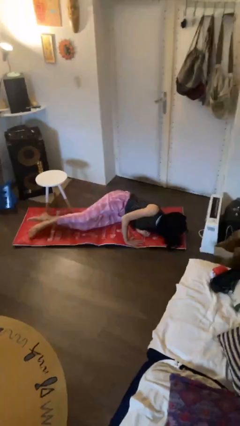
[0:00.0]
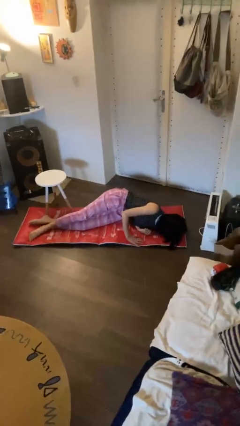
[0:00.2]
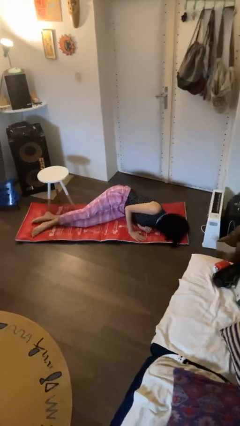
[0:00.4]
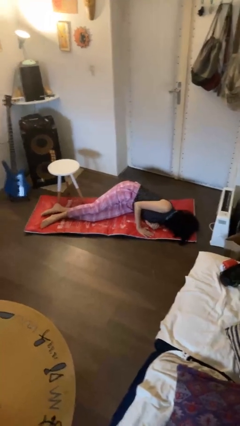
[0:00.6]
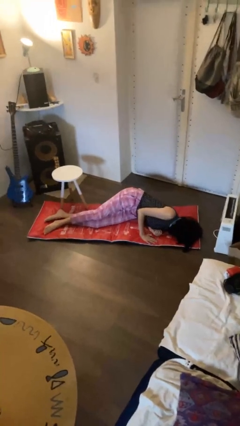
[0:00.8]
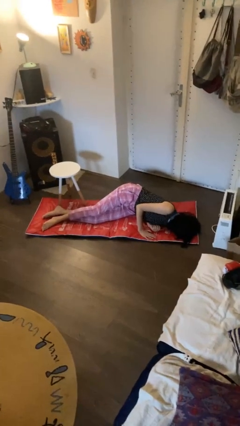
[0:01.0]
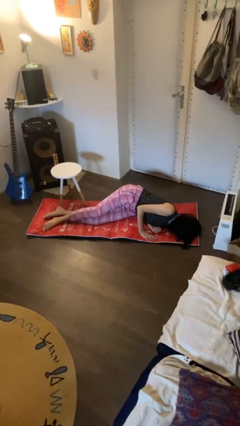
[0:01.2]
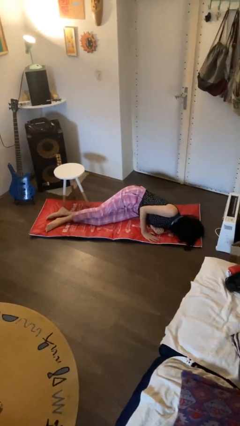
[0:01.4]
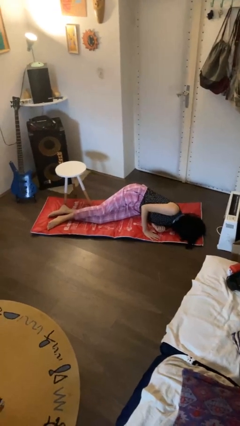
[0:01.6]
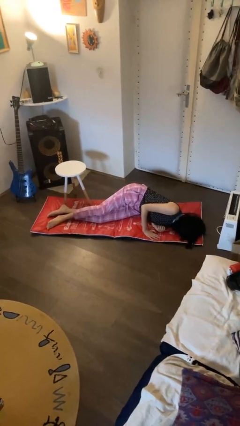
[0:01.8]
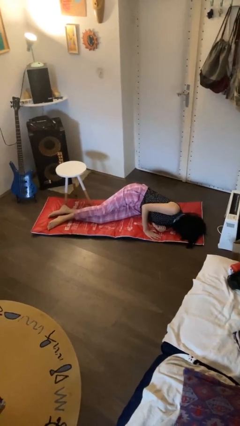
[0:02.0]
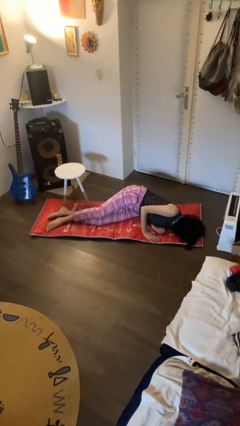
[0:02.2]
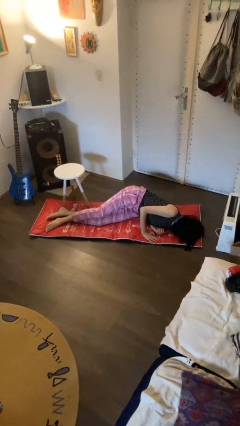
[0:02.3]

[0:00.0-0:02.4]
person lies down on floor

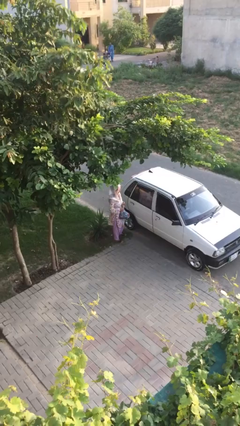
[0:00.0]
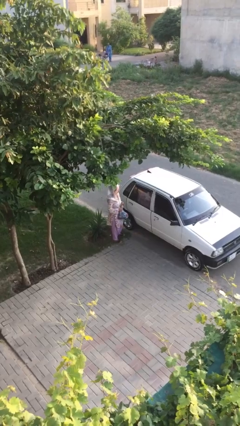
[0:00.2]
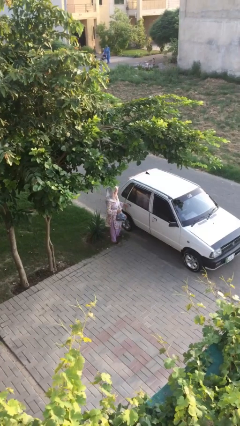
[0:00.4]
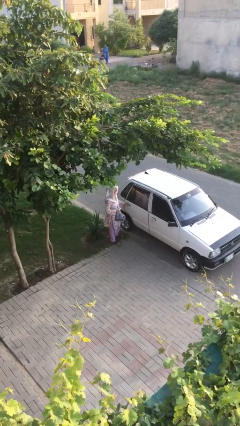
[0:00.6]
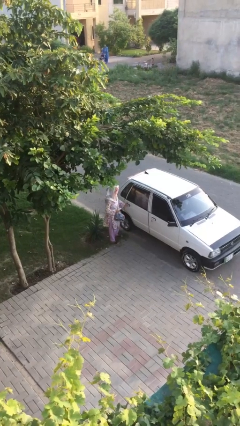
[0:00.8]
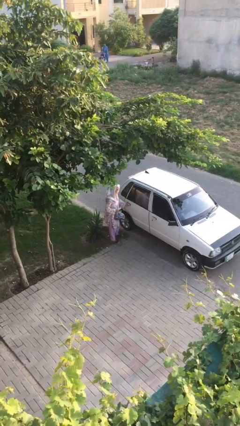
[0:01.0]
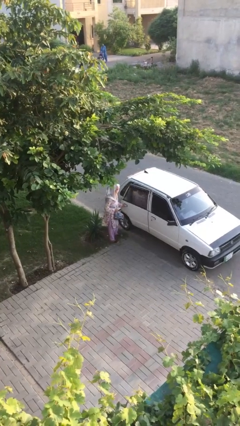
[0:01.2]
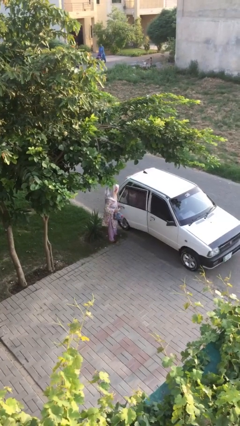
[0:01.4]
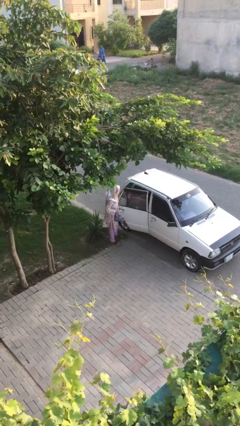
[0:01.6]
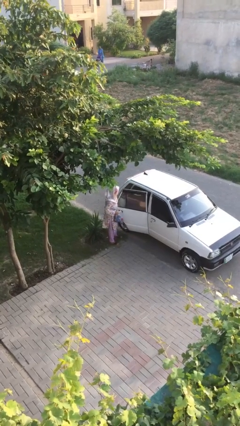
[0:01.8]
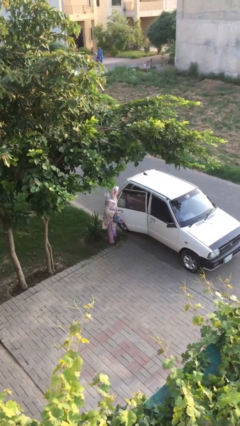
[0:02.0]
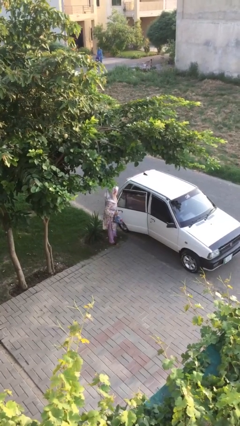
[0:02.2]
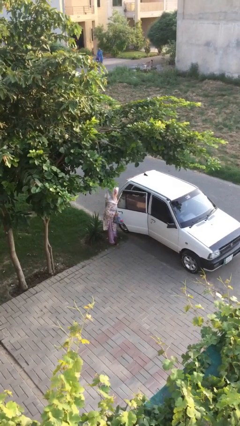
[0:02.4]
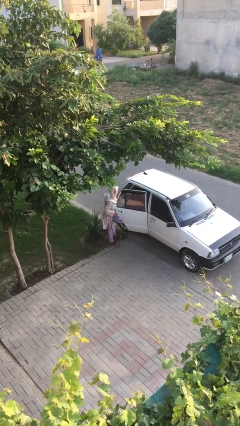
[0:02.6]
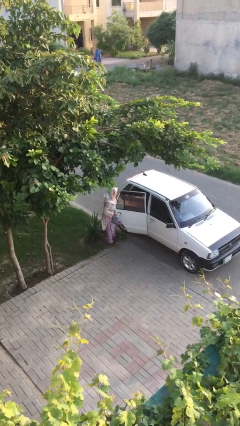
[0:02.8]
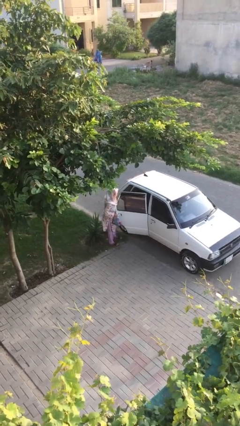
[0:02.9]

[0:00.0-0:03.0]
person opens car door

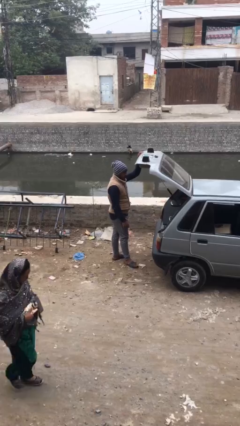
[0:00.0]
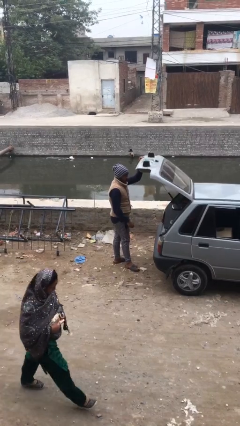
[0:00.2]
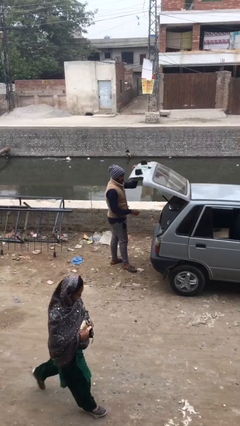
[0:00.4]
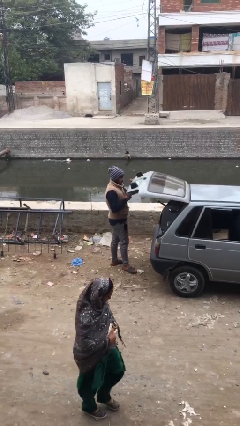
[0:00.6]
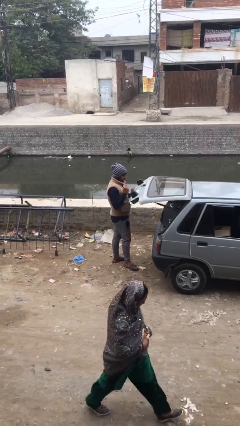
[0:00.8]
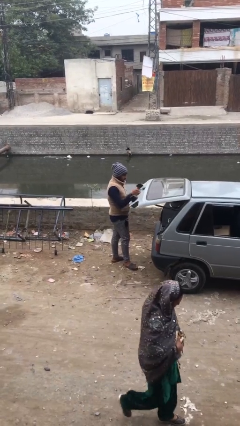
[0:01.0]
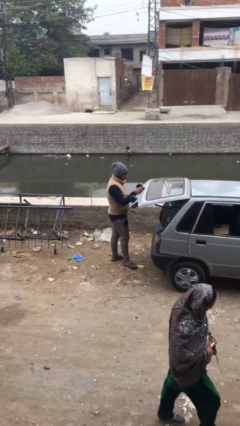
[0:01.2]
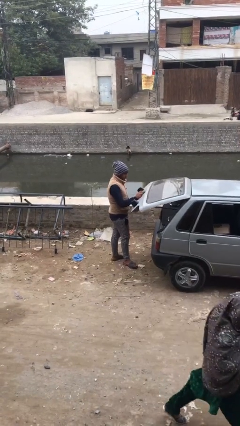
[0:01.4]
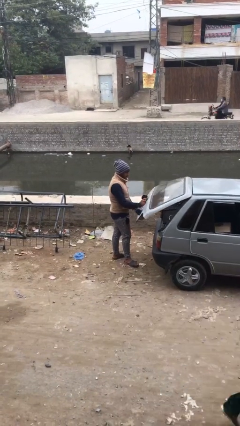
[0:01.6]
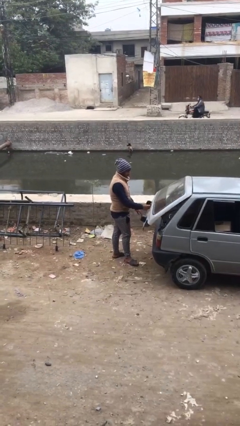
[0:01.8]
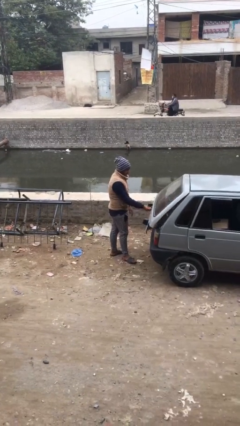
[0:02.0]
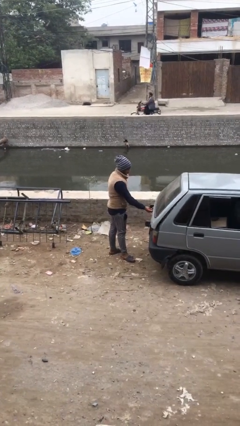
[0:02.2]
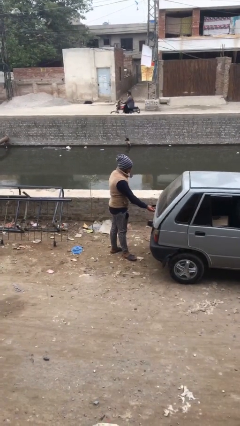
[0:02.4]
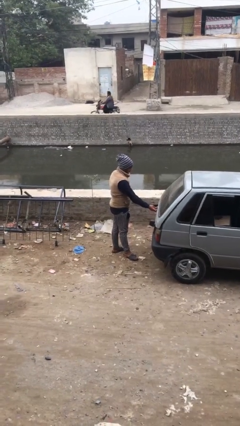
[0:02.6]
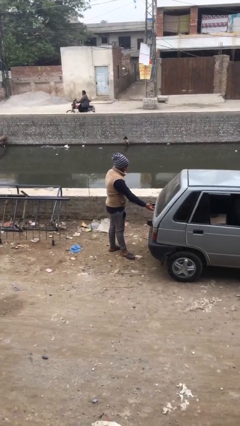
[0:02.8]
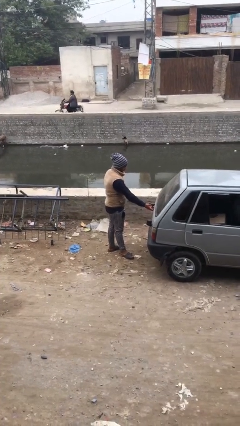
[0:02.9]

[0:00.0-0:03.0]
person closes car trunk

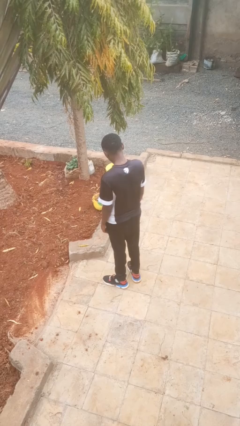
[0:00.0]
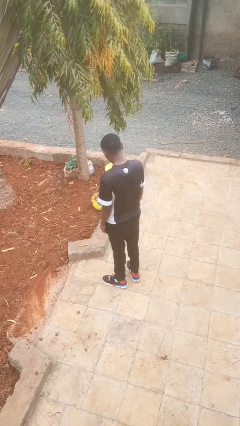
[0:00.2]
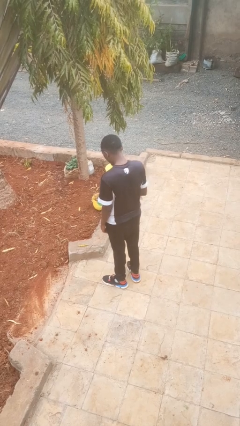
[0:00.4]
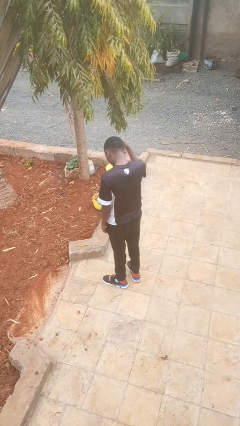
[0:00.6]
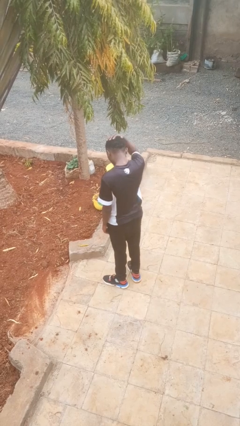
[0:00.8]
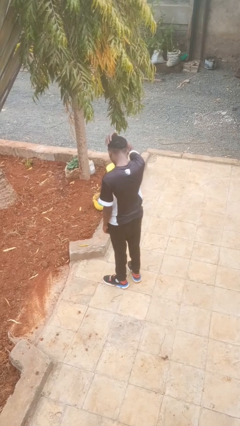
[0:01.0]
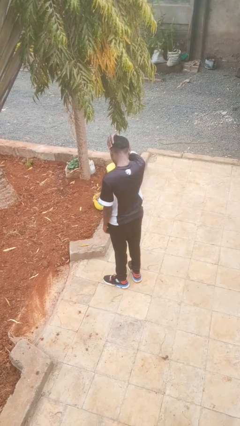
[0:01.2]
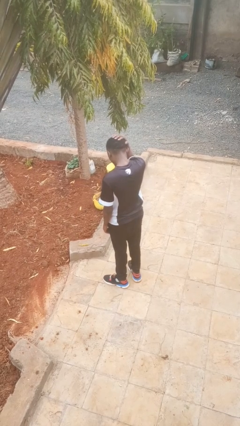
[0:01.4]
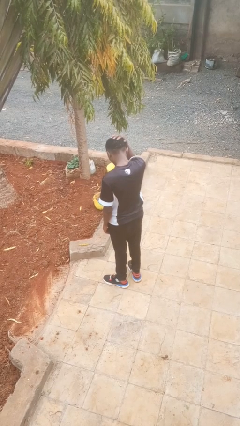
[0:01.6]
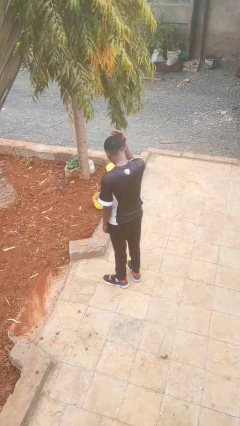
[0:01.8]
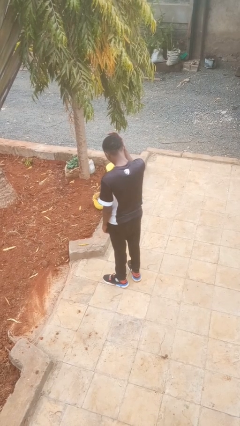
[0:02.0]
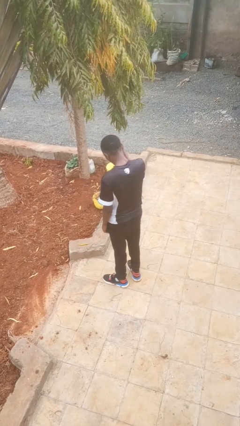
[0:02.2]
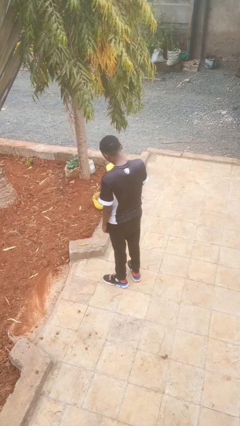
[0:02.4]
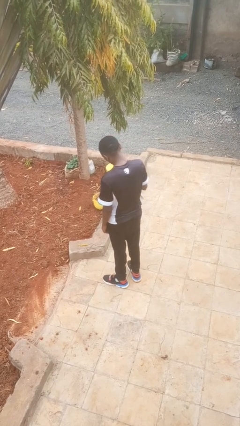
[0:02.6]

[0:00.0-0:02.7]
person pats head

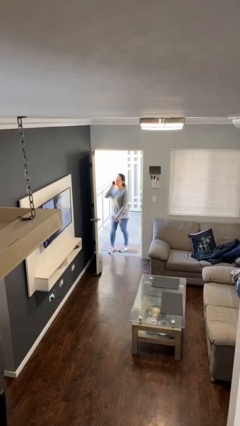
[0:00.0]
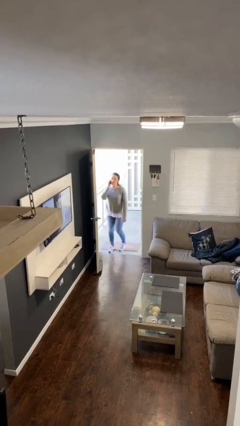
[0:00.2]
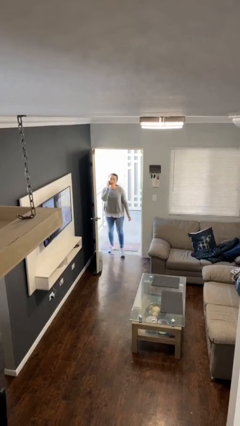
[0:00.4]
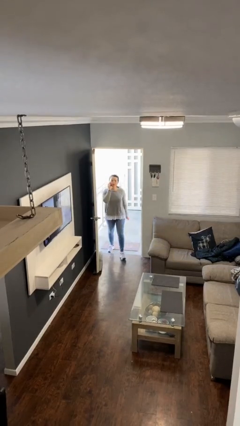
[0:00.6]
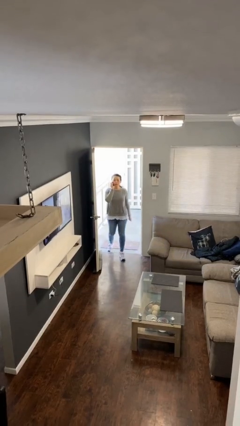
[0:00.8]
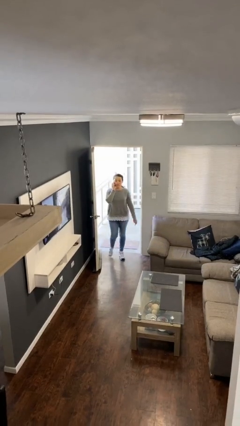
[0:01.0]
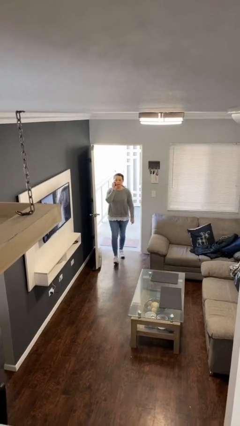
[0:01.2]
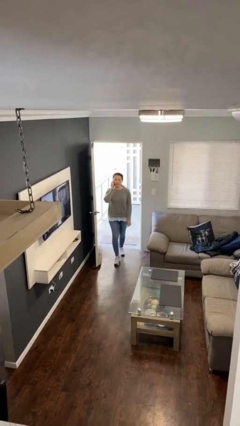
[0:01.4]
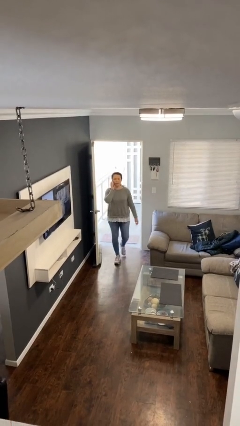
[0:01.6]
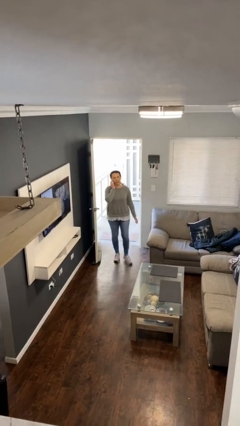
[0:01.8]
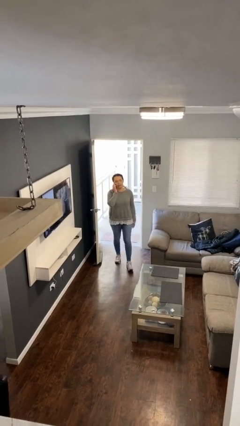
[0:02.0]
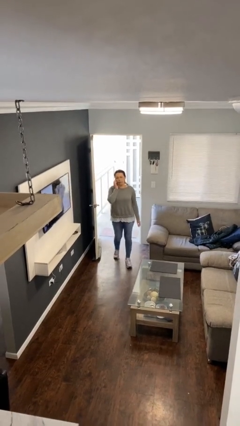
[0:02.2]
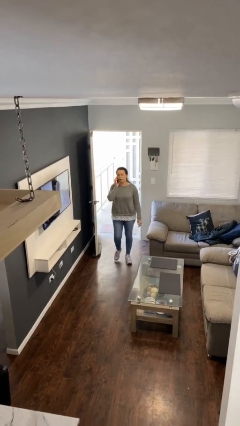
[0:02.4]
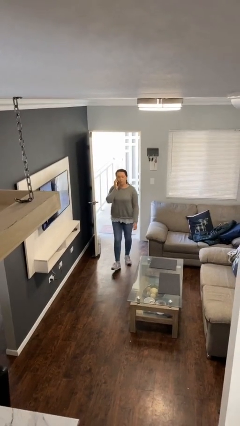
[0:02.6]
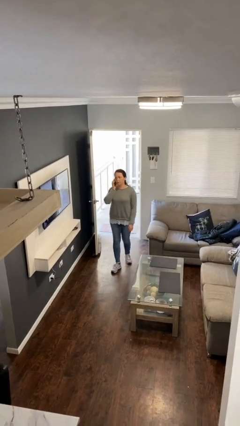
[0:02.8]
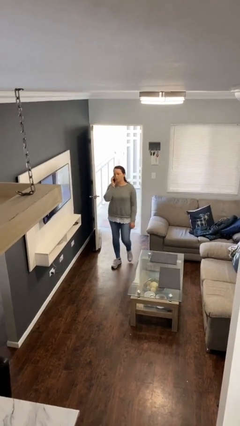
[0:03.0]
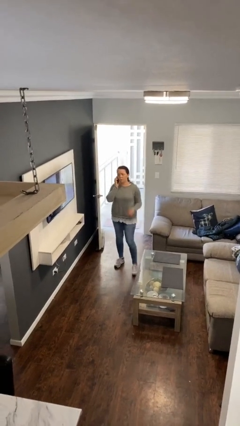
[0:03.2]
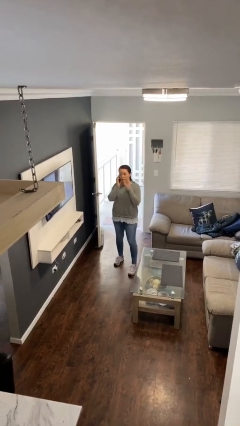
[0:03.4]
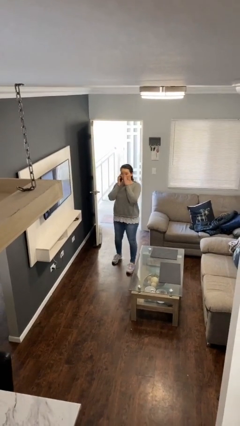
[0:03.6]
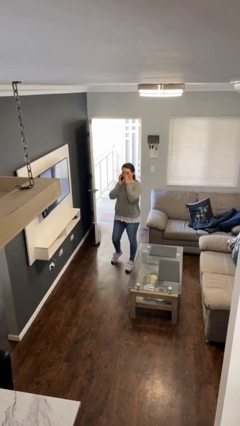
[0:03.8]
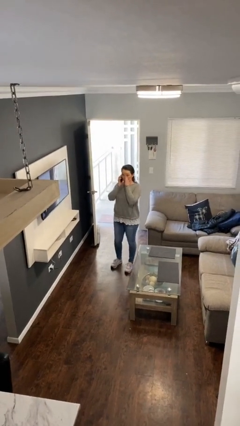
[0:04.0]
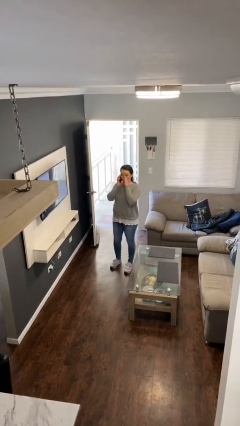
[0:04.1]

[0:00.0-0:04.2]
person enters scene through structure

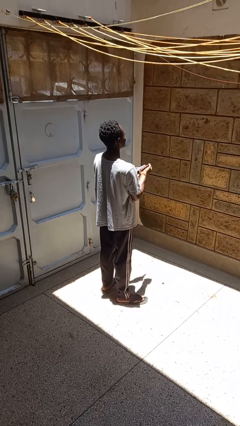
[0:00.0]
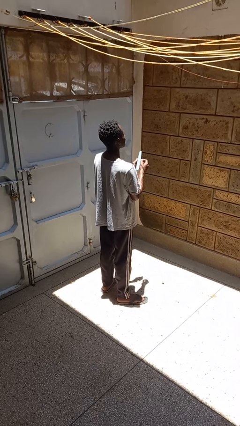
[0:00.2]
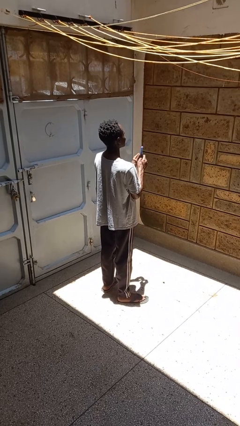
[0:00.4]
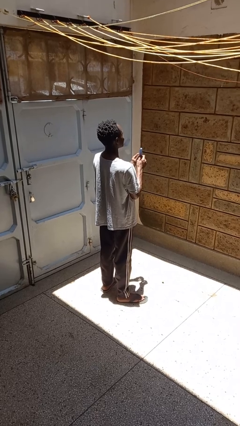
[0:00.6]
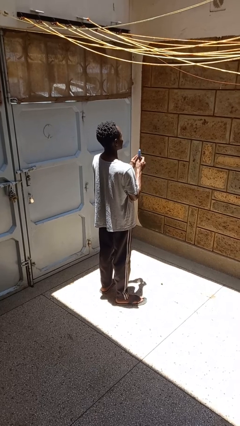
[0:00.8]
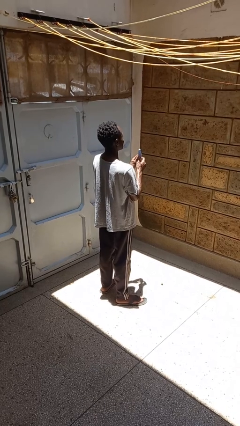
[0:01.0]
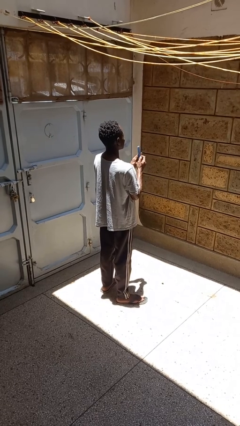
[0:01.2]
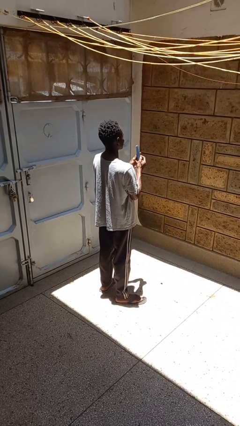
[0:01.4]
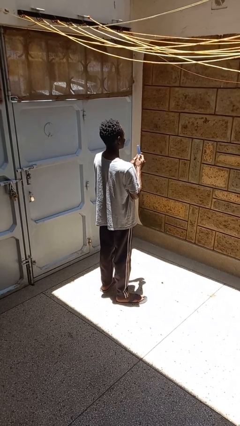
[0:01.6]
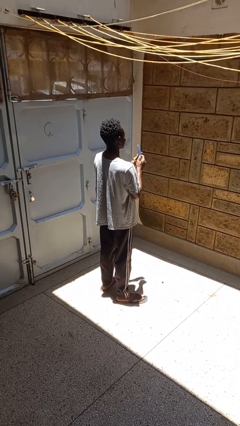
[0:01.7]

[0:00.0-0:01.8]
person files fingernails
